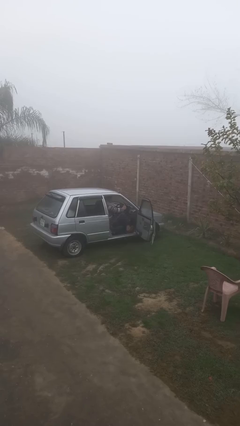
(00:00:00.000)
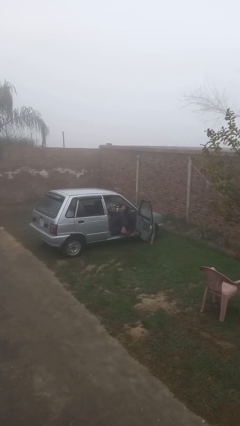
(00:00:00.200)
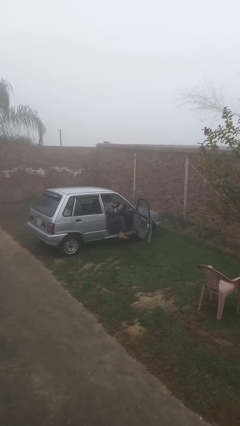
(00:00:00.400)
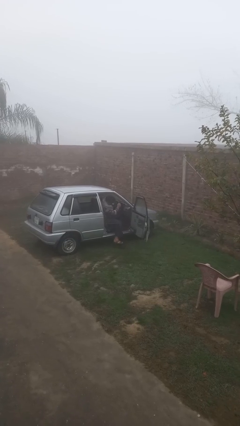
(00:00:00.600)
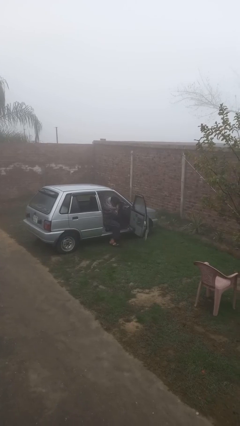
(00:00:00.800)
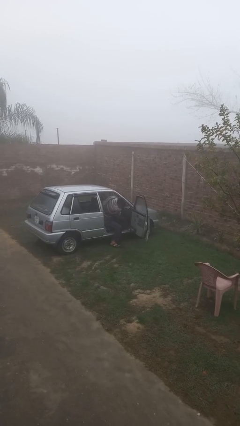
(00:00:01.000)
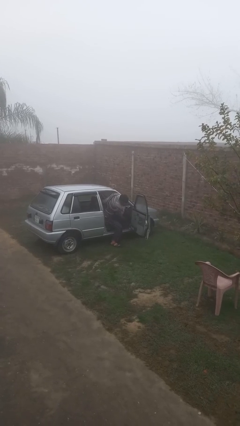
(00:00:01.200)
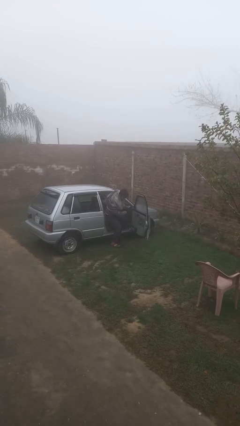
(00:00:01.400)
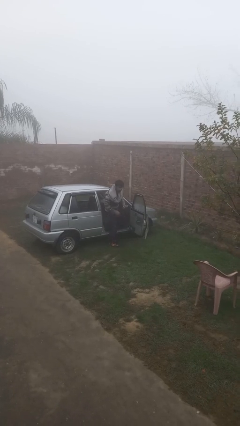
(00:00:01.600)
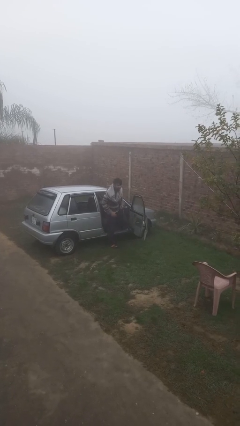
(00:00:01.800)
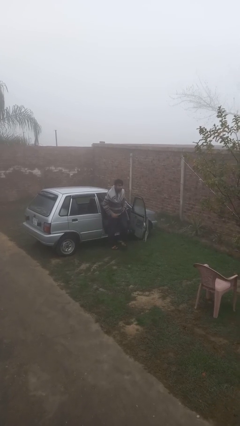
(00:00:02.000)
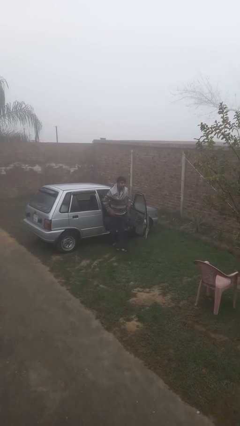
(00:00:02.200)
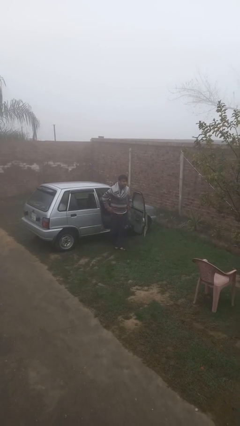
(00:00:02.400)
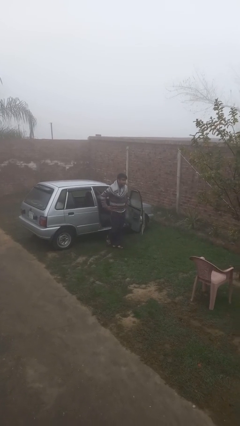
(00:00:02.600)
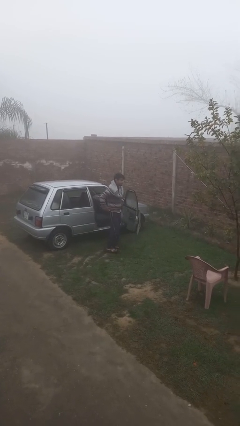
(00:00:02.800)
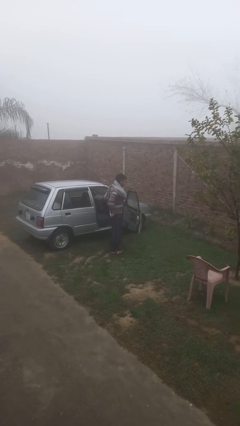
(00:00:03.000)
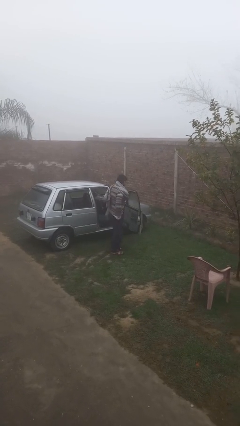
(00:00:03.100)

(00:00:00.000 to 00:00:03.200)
person exits car

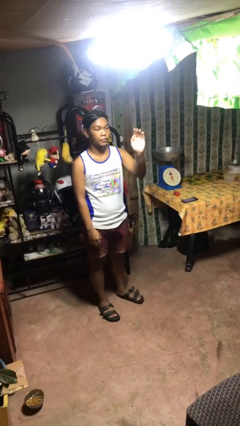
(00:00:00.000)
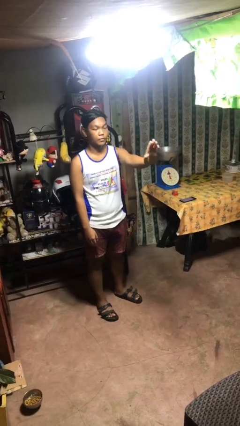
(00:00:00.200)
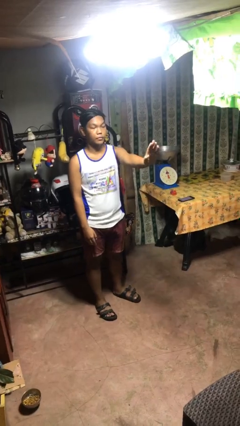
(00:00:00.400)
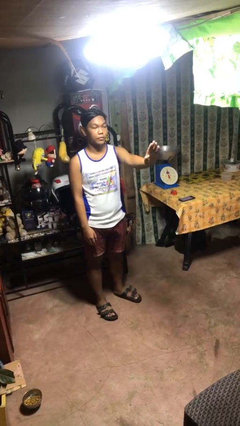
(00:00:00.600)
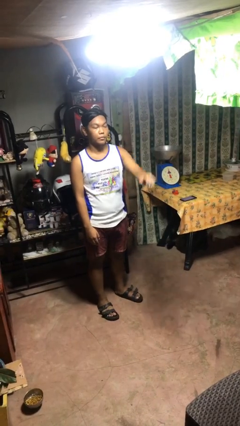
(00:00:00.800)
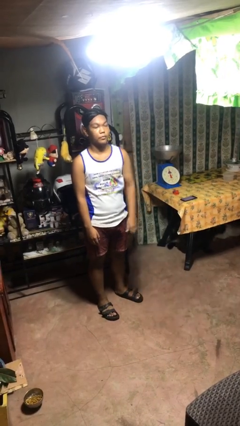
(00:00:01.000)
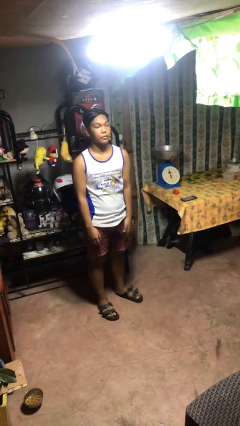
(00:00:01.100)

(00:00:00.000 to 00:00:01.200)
person gestures stop

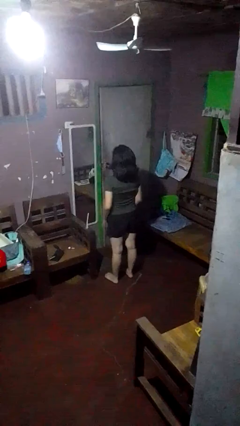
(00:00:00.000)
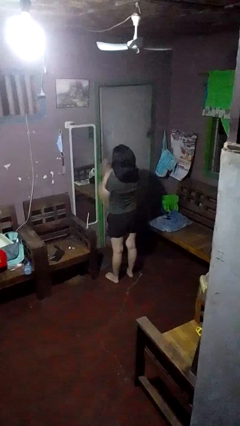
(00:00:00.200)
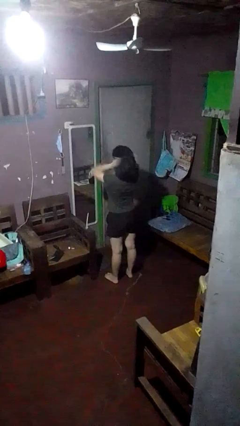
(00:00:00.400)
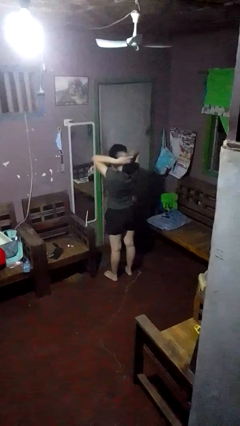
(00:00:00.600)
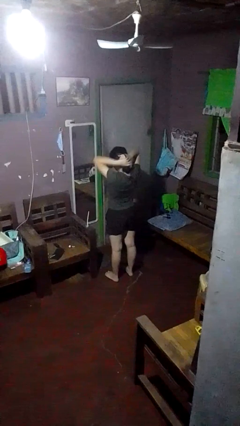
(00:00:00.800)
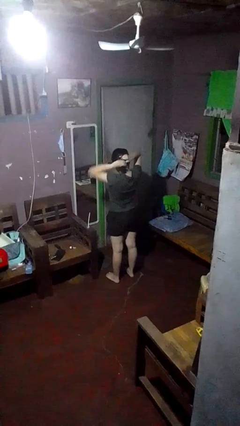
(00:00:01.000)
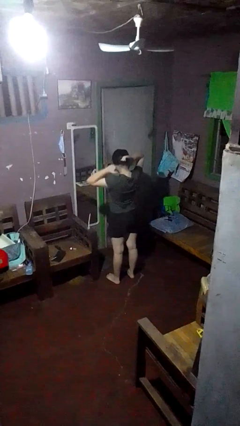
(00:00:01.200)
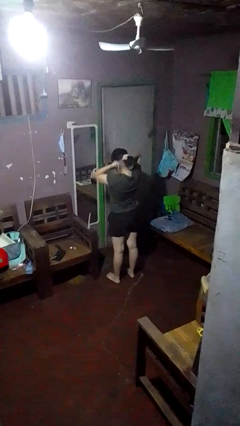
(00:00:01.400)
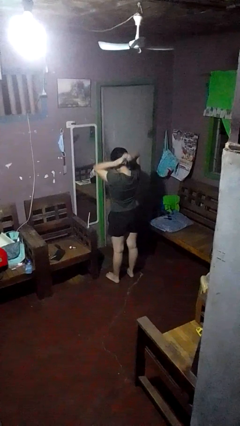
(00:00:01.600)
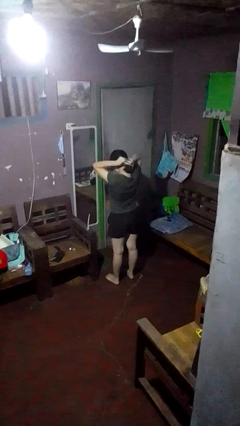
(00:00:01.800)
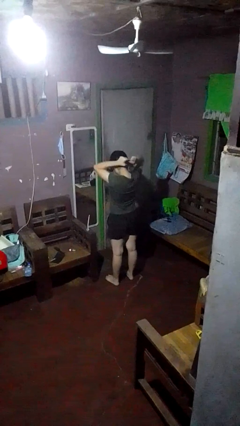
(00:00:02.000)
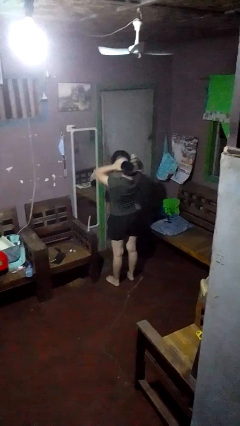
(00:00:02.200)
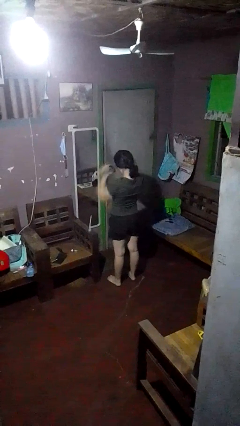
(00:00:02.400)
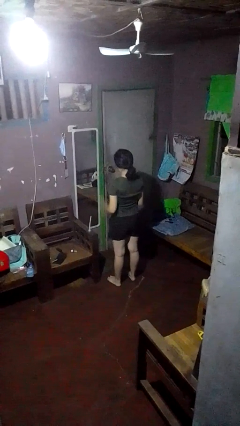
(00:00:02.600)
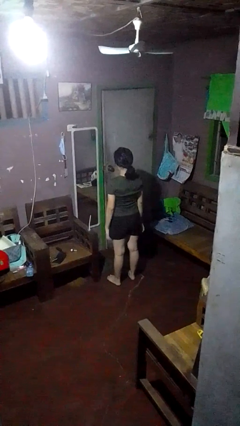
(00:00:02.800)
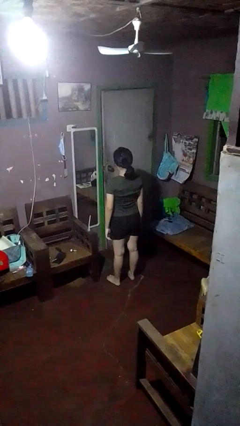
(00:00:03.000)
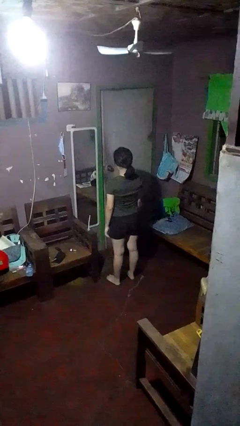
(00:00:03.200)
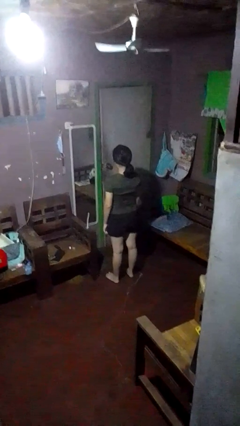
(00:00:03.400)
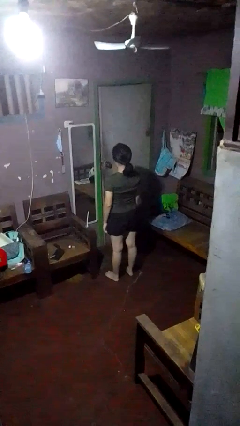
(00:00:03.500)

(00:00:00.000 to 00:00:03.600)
person puts hair in ponytail

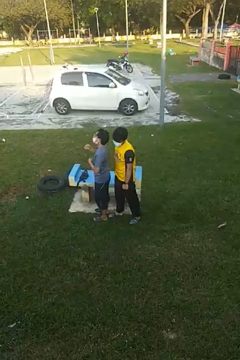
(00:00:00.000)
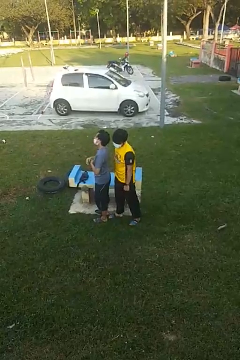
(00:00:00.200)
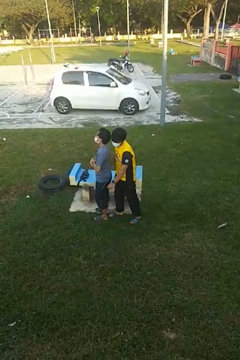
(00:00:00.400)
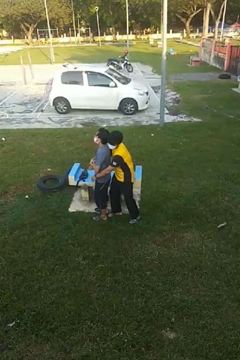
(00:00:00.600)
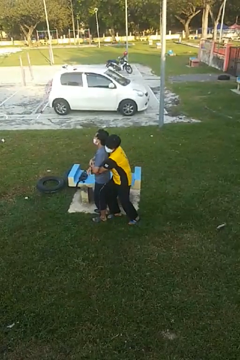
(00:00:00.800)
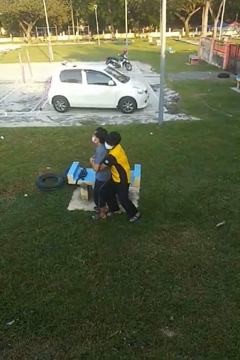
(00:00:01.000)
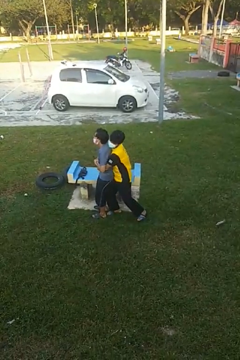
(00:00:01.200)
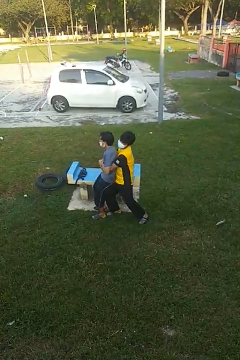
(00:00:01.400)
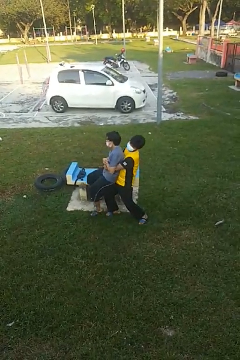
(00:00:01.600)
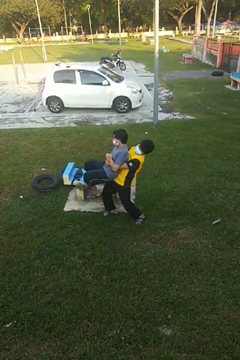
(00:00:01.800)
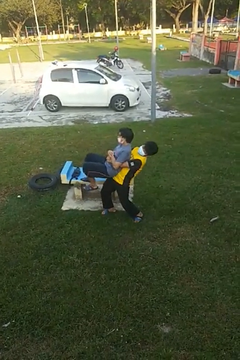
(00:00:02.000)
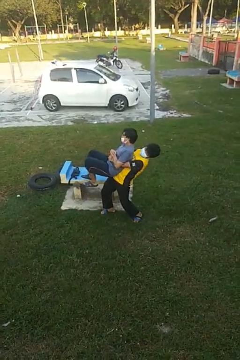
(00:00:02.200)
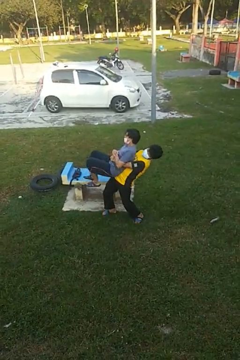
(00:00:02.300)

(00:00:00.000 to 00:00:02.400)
person picks up person

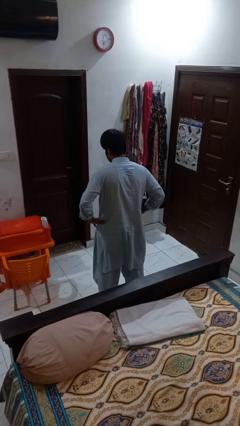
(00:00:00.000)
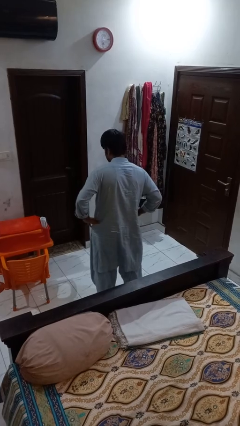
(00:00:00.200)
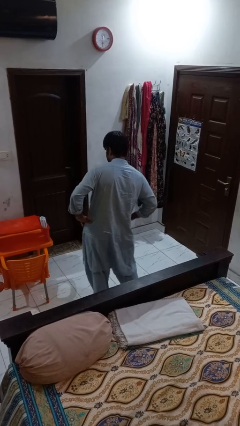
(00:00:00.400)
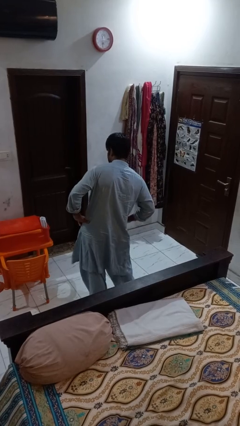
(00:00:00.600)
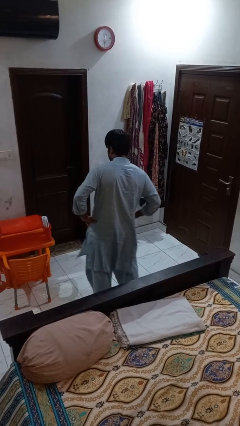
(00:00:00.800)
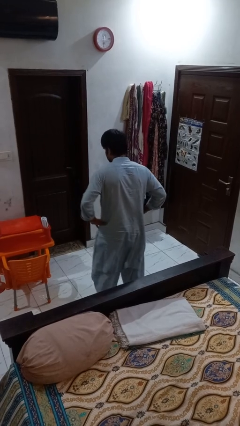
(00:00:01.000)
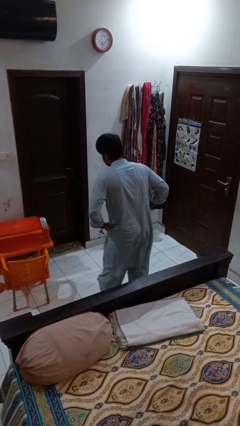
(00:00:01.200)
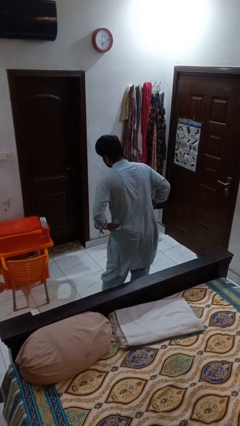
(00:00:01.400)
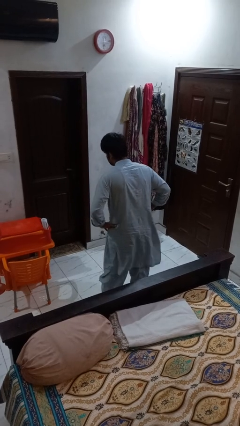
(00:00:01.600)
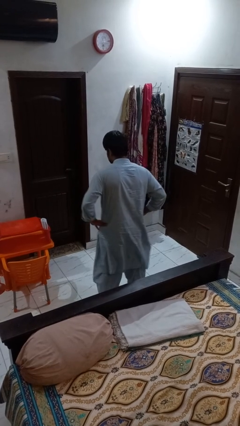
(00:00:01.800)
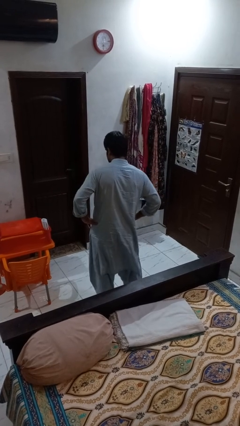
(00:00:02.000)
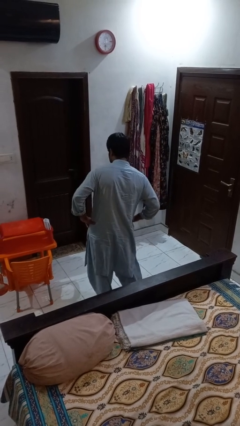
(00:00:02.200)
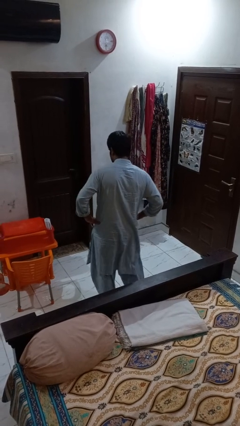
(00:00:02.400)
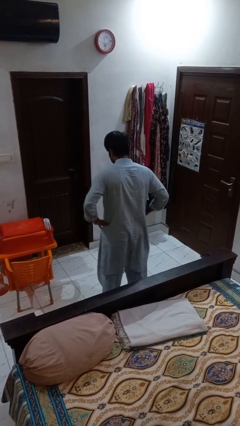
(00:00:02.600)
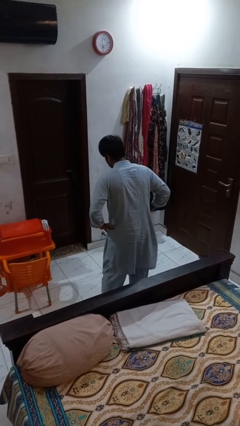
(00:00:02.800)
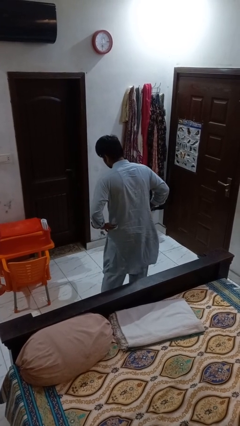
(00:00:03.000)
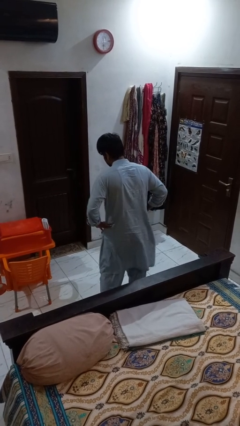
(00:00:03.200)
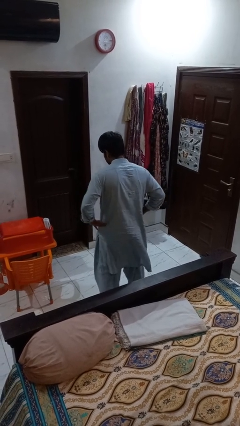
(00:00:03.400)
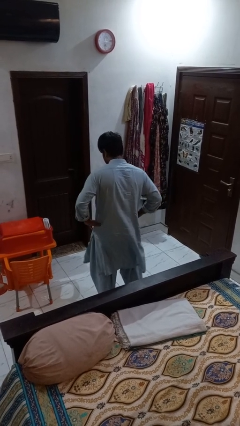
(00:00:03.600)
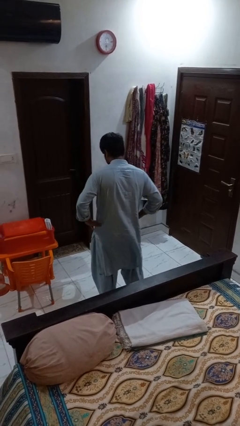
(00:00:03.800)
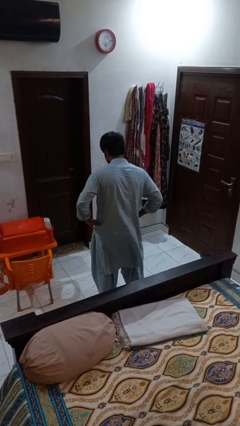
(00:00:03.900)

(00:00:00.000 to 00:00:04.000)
person wiggles hips

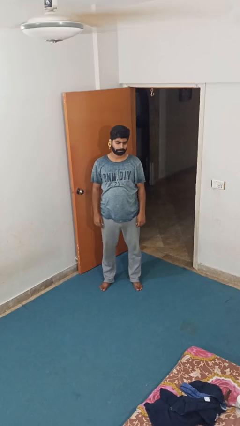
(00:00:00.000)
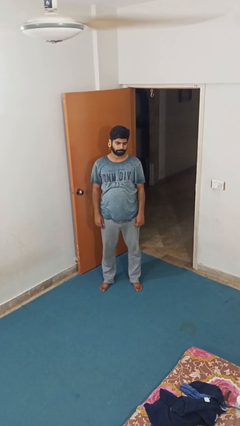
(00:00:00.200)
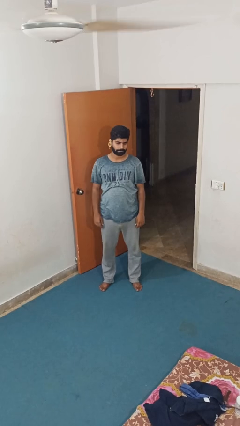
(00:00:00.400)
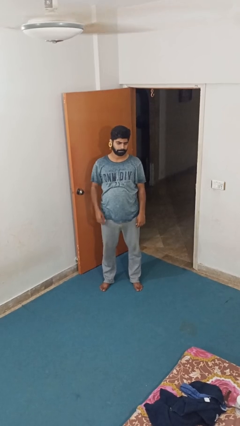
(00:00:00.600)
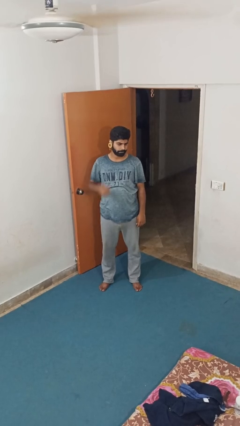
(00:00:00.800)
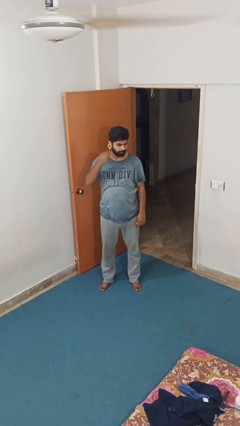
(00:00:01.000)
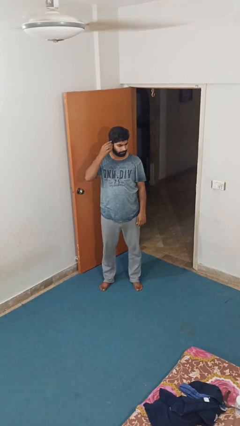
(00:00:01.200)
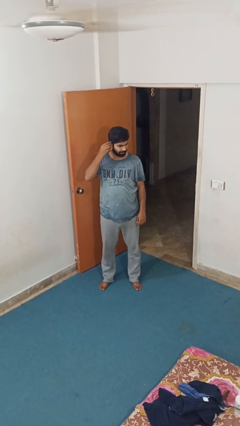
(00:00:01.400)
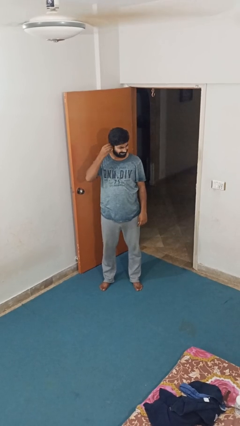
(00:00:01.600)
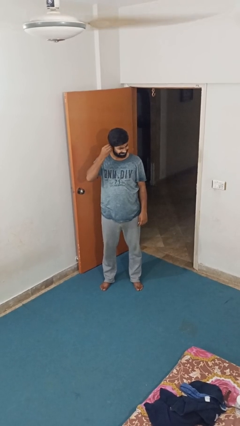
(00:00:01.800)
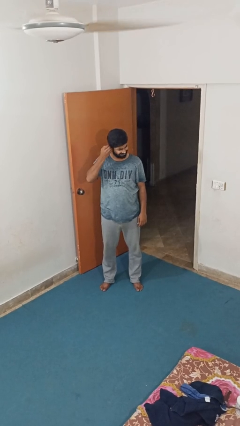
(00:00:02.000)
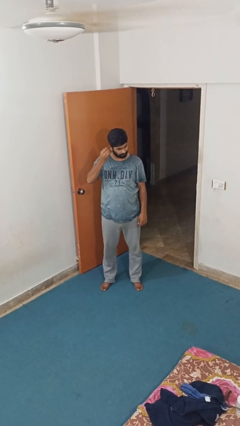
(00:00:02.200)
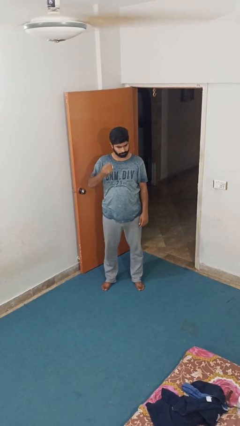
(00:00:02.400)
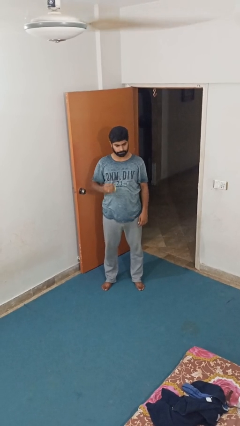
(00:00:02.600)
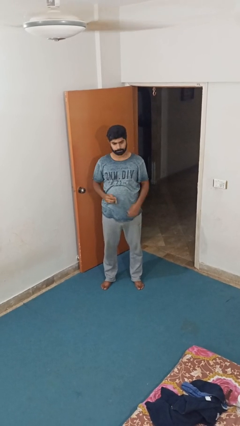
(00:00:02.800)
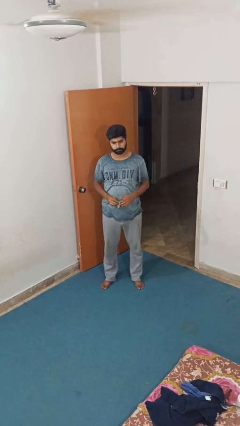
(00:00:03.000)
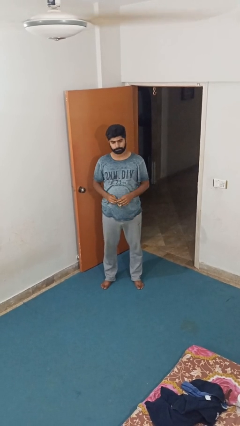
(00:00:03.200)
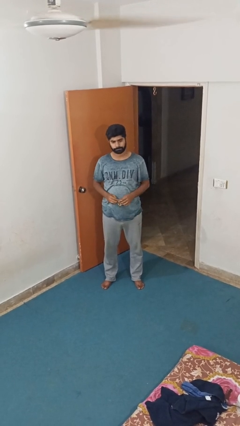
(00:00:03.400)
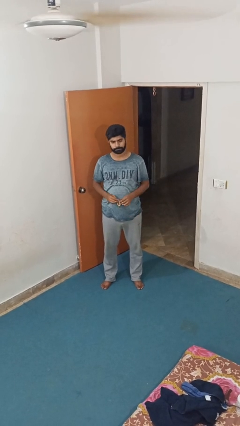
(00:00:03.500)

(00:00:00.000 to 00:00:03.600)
person takes off earrings
